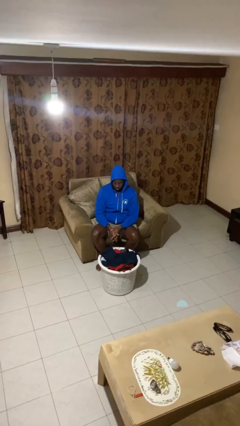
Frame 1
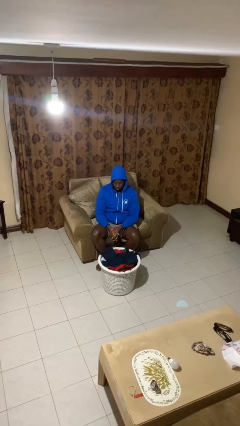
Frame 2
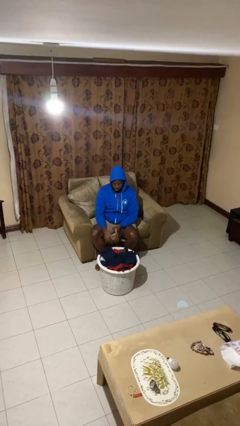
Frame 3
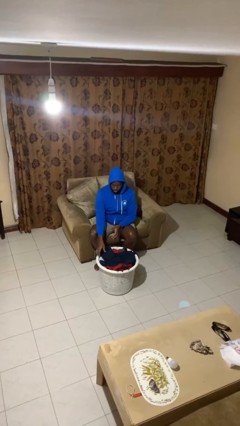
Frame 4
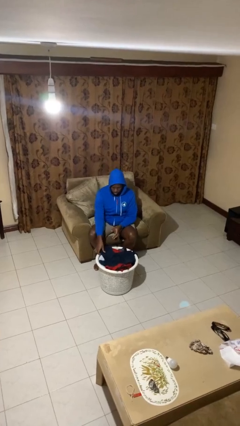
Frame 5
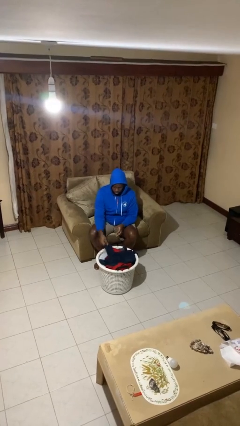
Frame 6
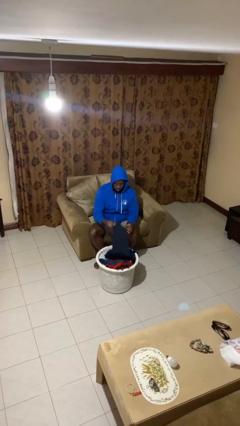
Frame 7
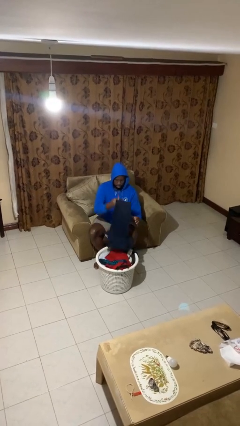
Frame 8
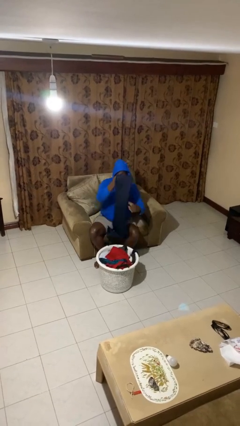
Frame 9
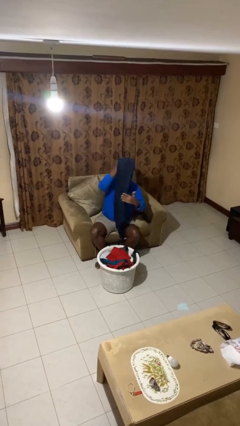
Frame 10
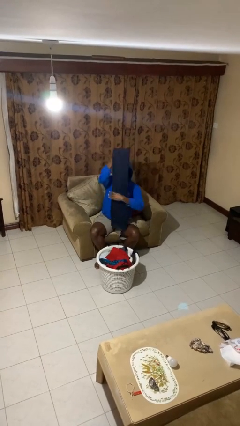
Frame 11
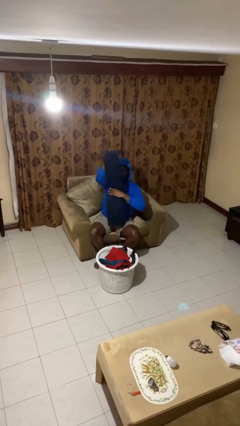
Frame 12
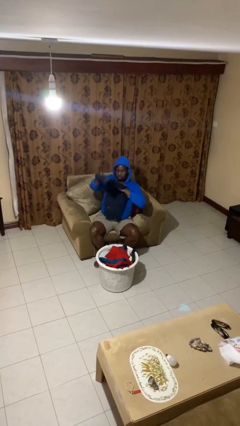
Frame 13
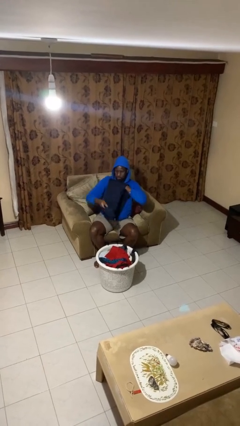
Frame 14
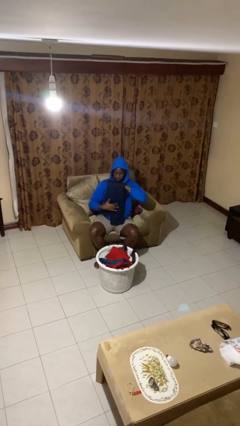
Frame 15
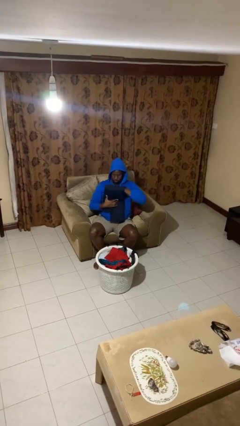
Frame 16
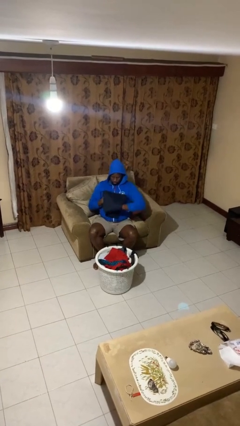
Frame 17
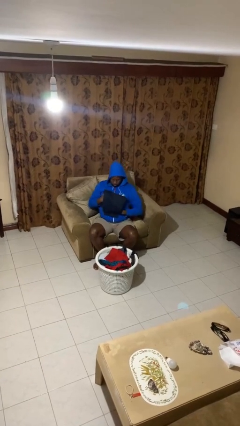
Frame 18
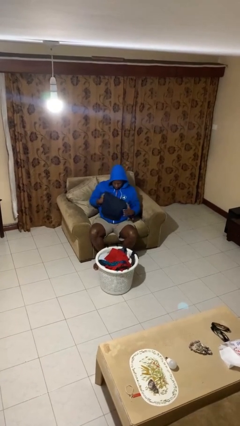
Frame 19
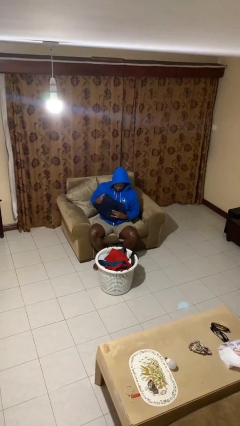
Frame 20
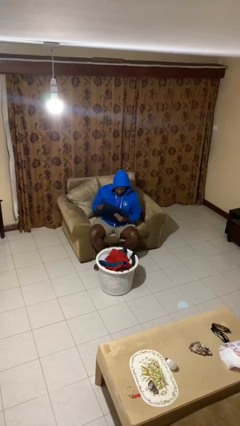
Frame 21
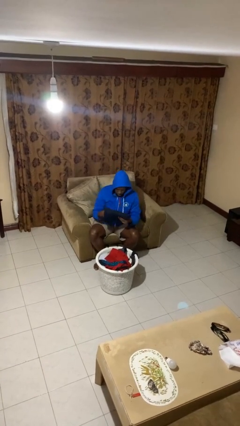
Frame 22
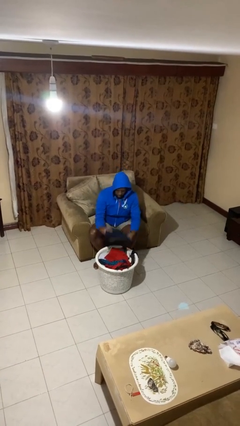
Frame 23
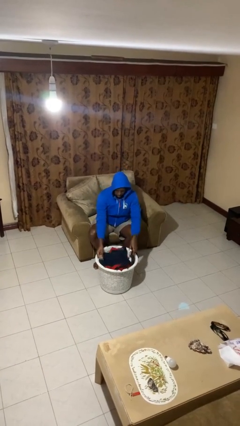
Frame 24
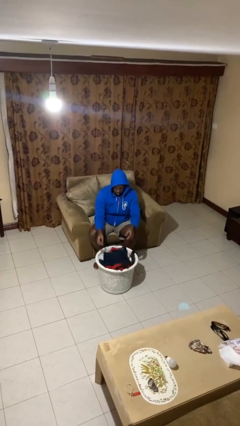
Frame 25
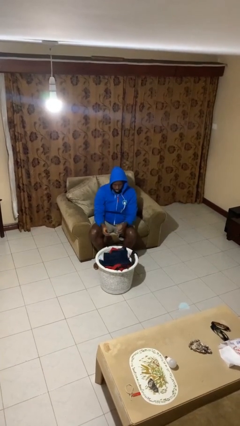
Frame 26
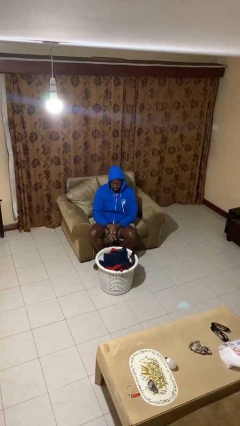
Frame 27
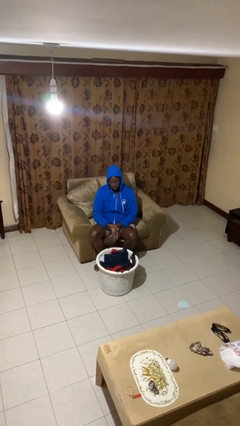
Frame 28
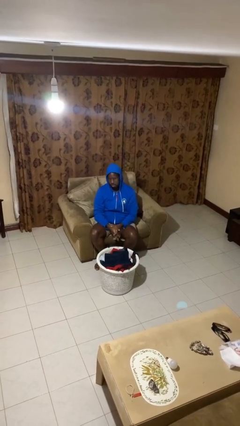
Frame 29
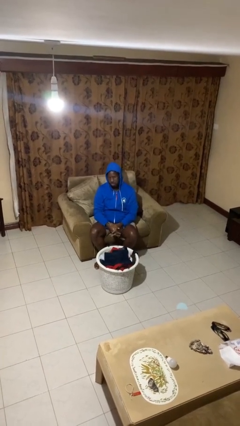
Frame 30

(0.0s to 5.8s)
person folds pants

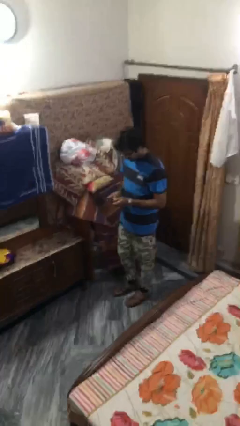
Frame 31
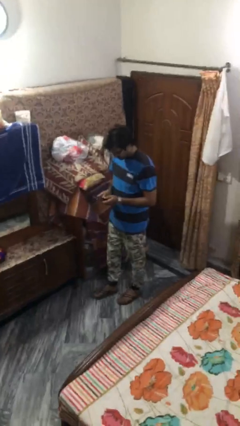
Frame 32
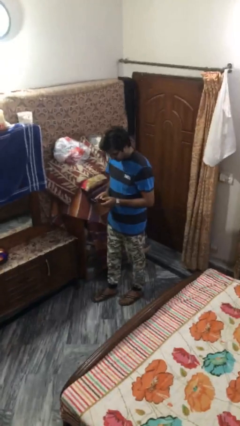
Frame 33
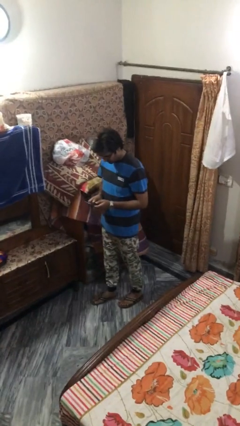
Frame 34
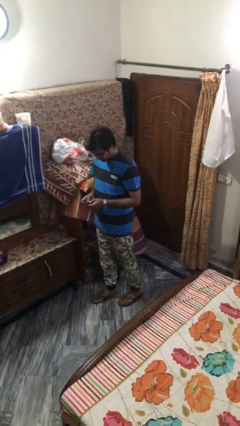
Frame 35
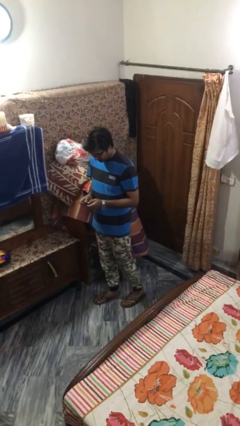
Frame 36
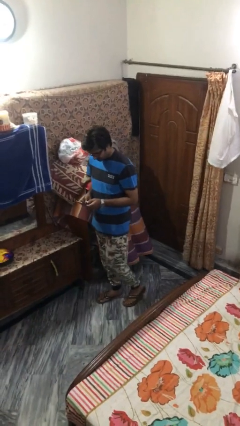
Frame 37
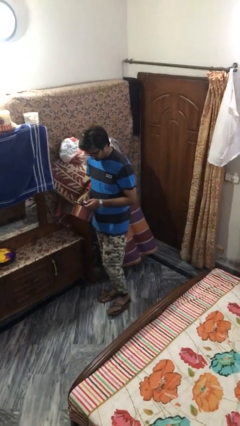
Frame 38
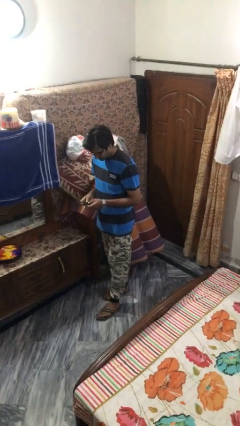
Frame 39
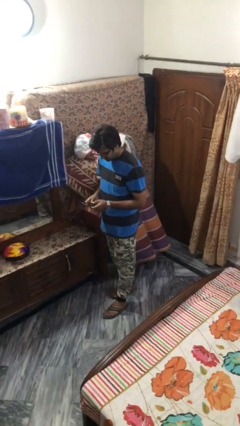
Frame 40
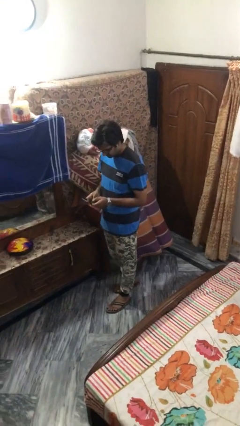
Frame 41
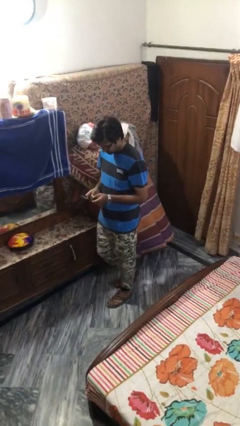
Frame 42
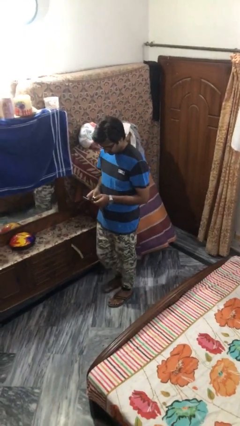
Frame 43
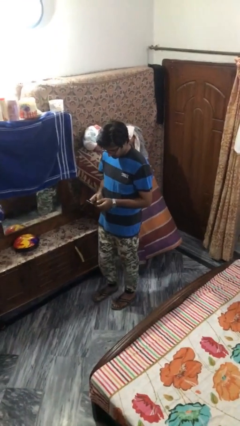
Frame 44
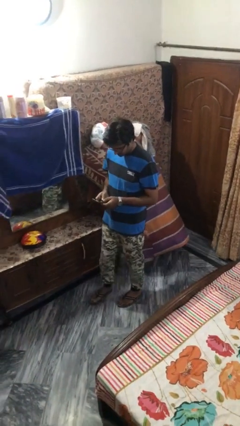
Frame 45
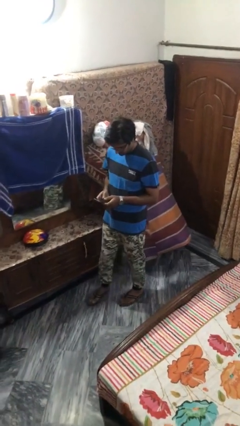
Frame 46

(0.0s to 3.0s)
person texts on phone

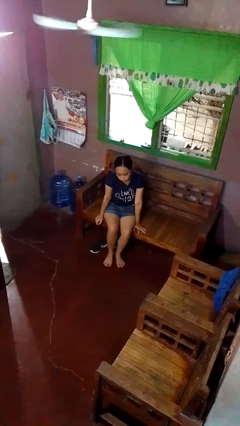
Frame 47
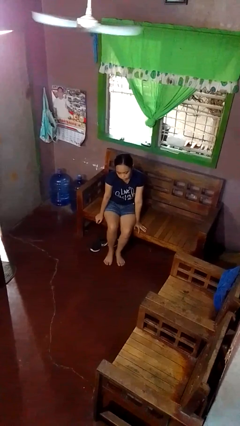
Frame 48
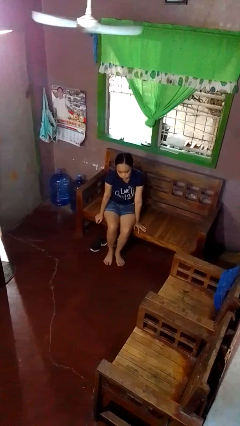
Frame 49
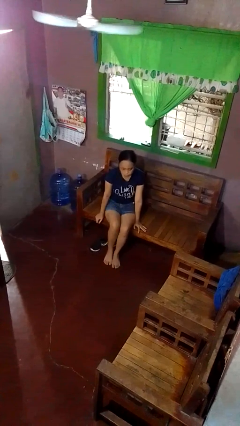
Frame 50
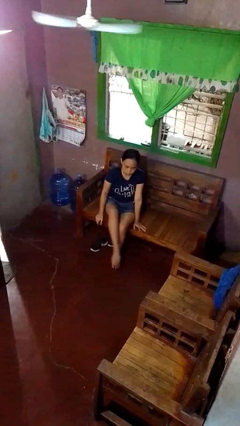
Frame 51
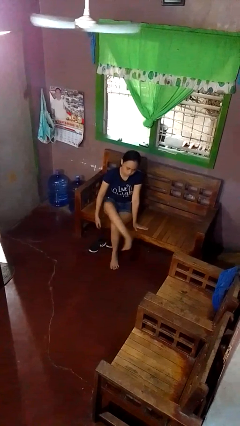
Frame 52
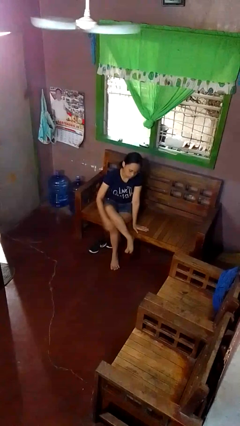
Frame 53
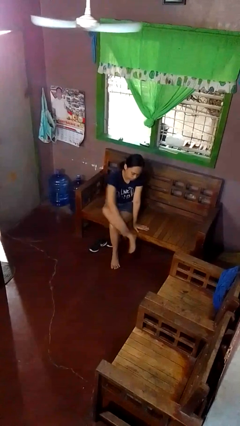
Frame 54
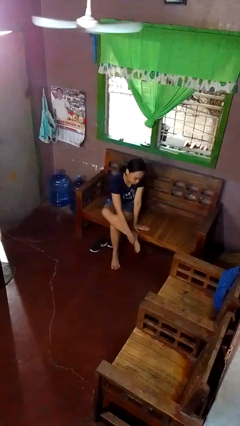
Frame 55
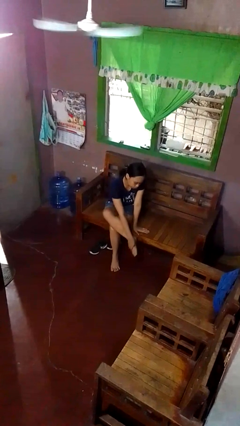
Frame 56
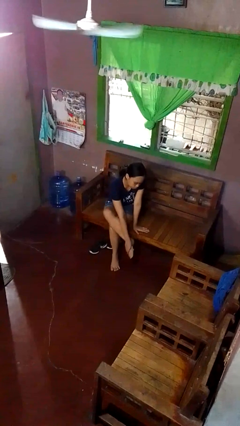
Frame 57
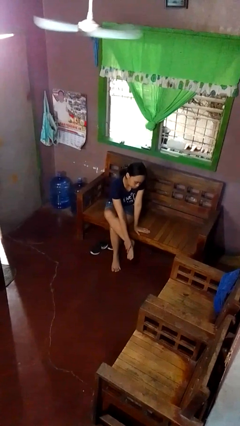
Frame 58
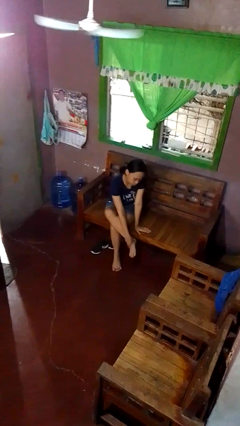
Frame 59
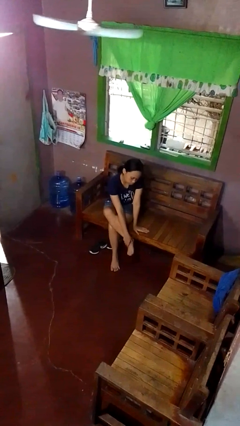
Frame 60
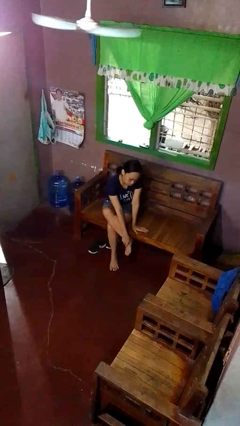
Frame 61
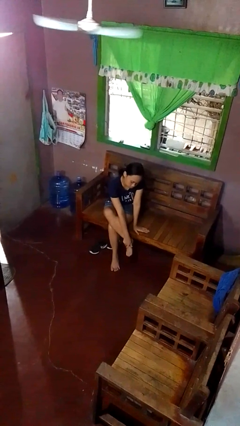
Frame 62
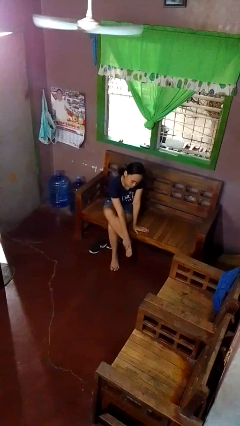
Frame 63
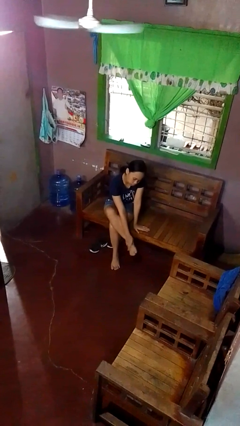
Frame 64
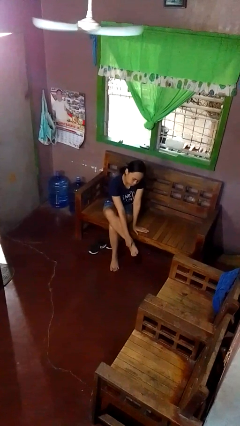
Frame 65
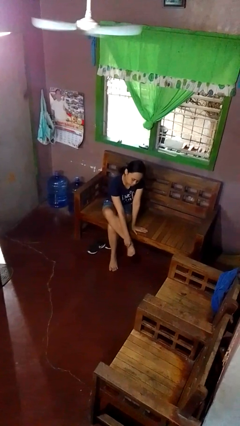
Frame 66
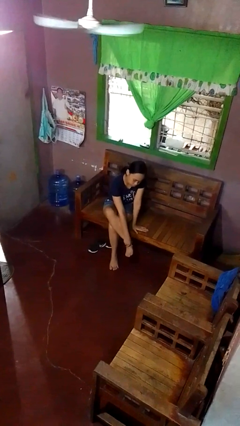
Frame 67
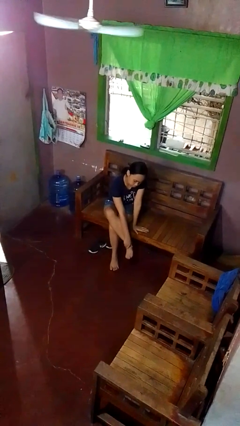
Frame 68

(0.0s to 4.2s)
person rubs foot

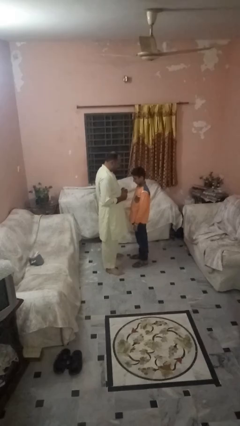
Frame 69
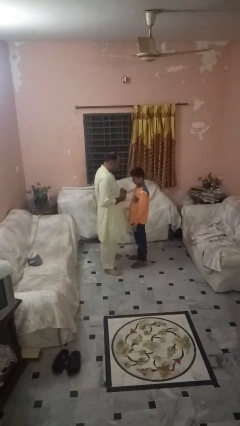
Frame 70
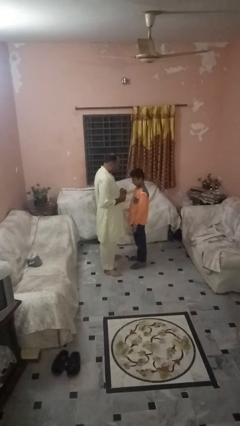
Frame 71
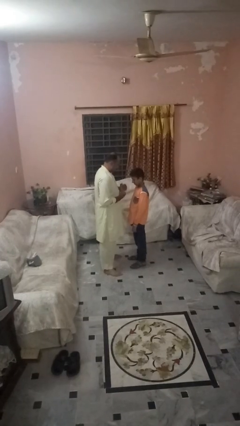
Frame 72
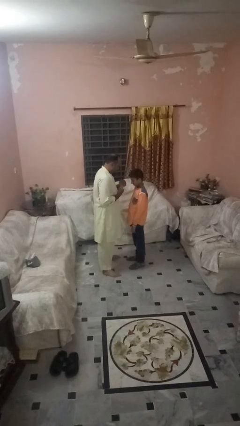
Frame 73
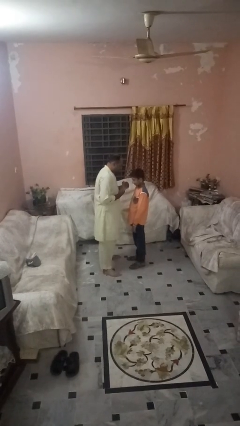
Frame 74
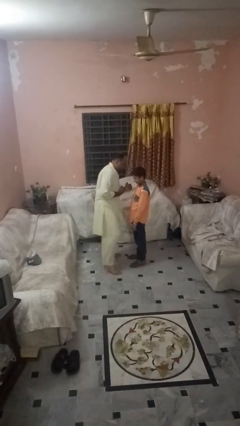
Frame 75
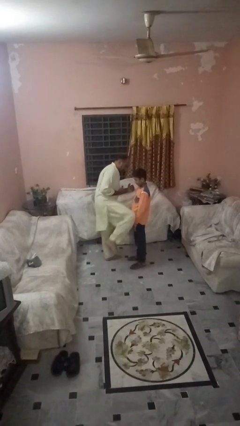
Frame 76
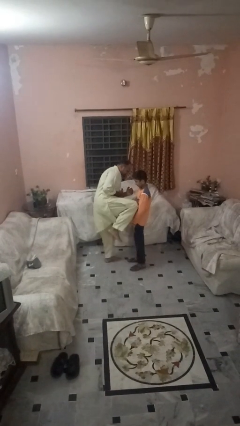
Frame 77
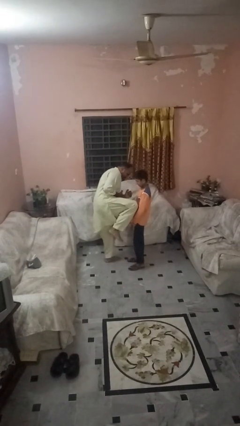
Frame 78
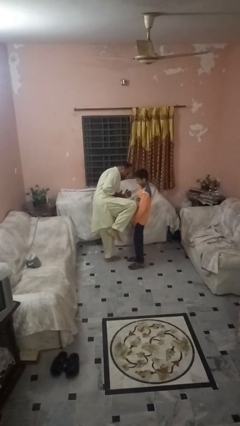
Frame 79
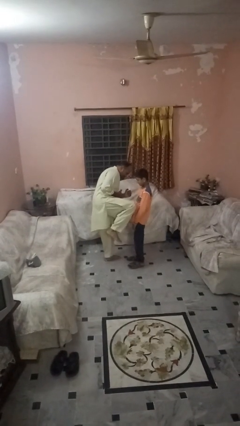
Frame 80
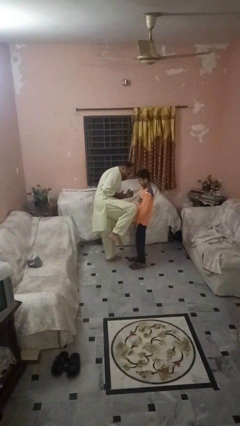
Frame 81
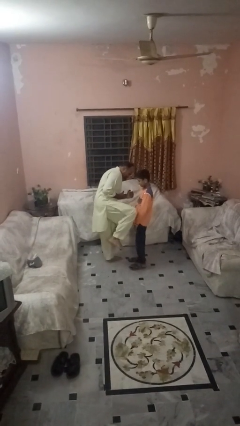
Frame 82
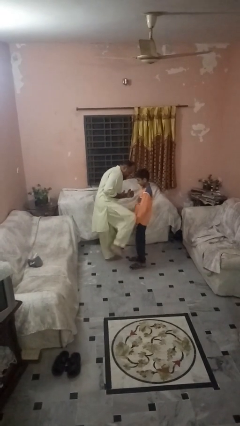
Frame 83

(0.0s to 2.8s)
person kicks object to person

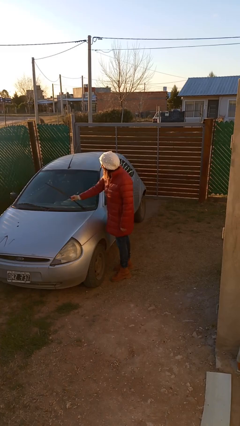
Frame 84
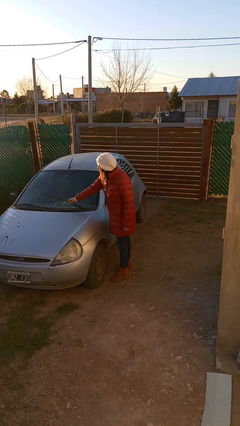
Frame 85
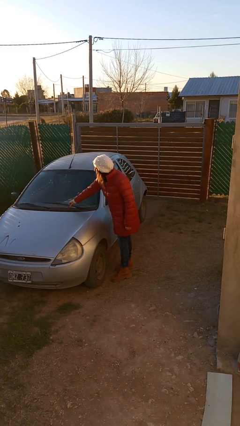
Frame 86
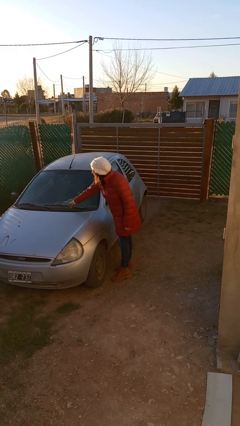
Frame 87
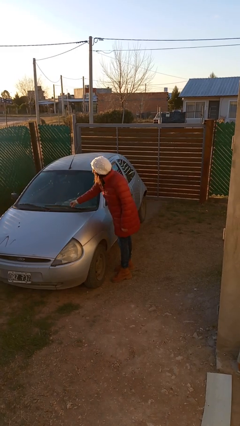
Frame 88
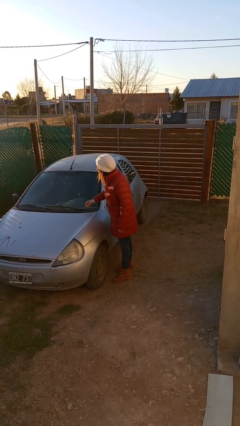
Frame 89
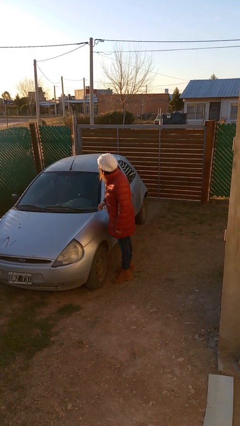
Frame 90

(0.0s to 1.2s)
person flips down car wipers

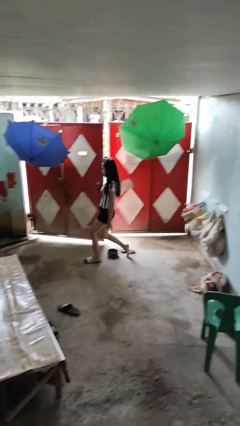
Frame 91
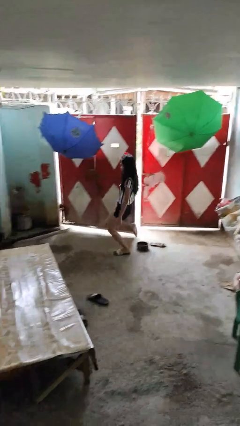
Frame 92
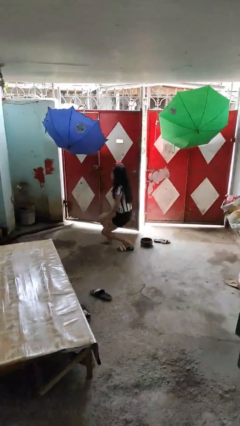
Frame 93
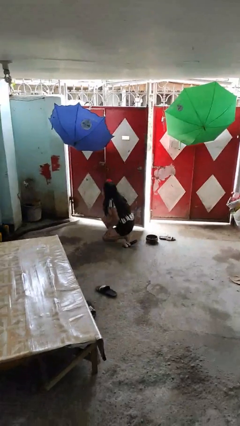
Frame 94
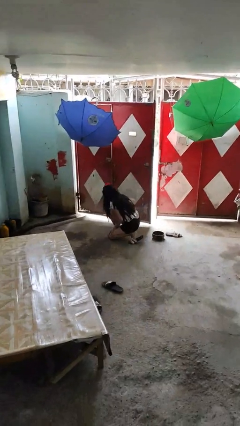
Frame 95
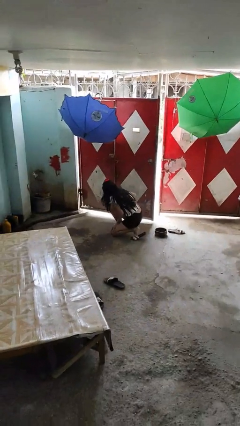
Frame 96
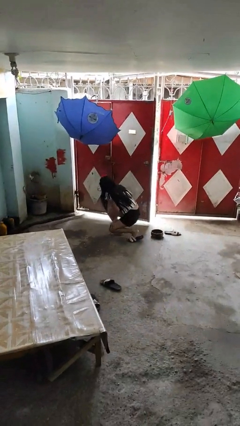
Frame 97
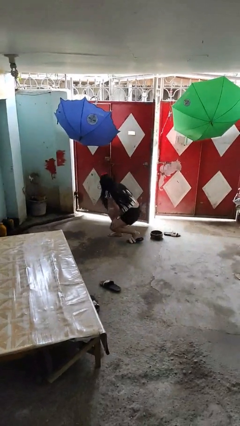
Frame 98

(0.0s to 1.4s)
person trips on object on floor
